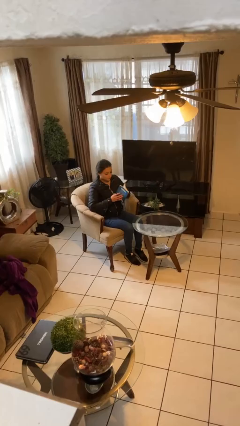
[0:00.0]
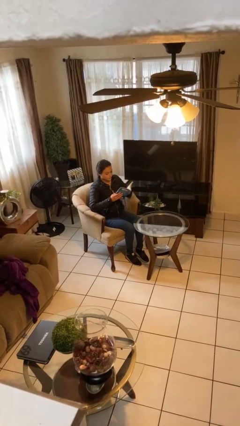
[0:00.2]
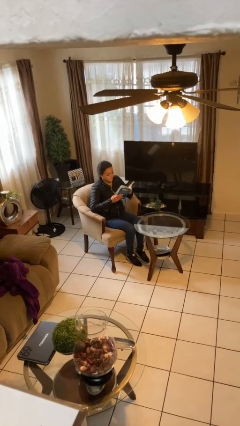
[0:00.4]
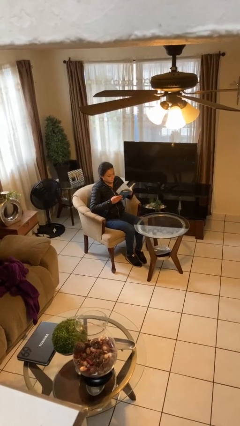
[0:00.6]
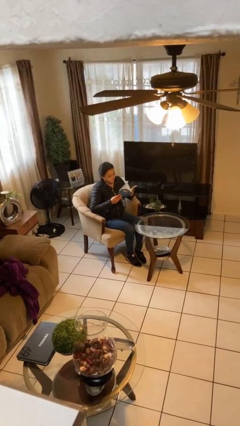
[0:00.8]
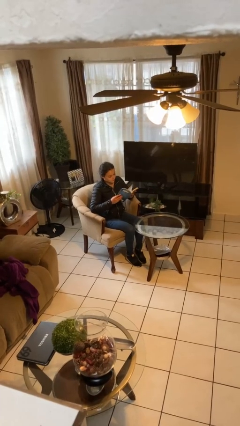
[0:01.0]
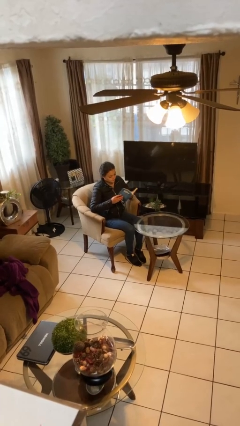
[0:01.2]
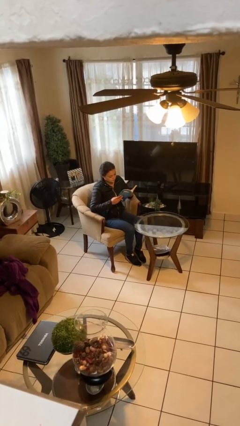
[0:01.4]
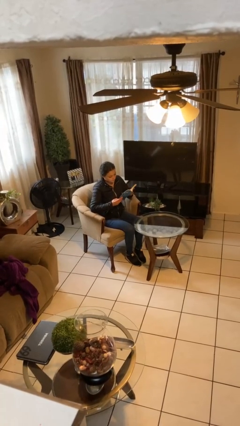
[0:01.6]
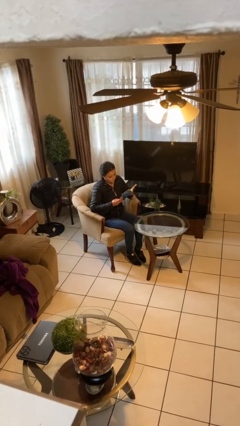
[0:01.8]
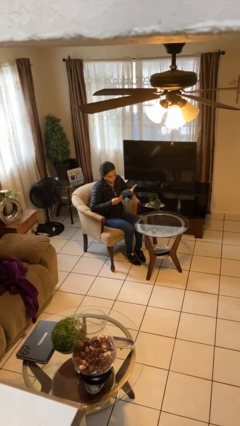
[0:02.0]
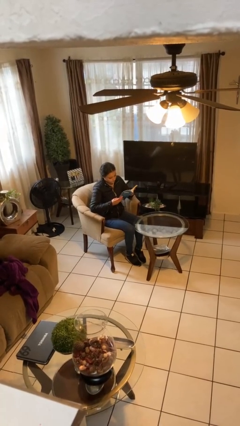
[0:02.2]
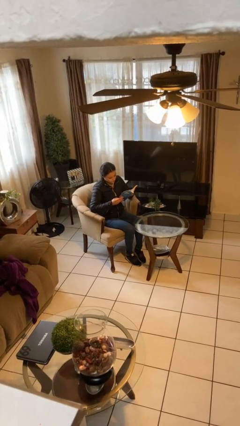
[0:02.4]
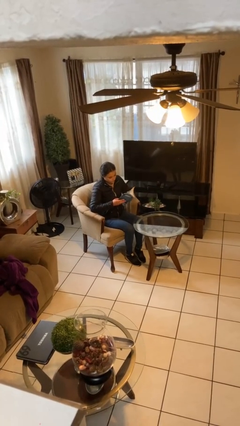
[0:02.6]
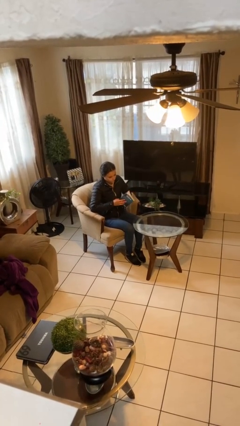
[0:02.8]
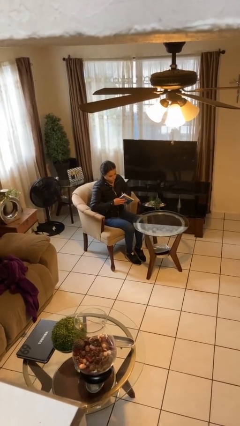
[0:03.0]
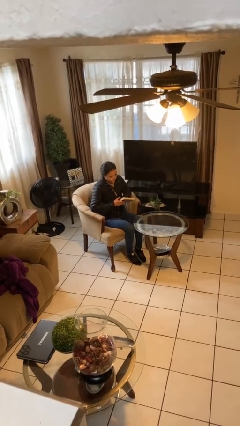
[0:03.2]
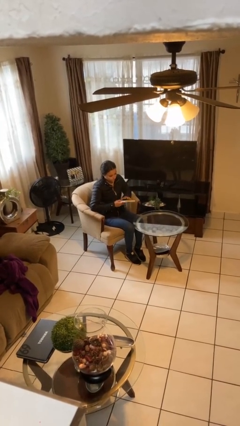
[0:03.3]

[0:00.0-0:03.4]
person reads document

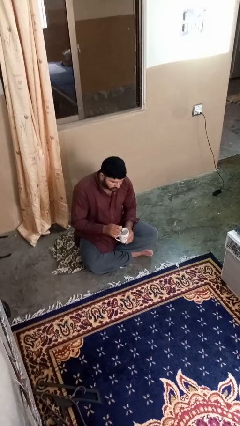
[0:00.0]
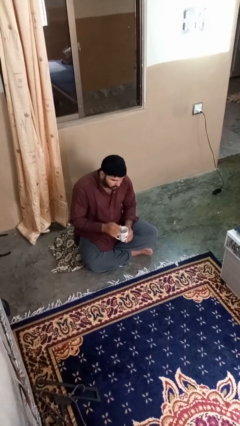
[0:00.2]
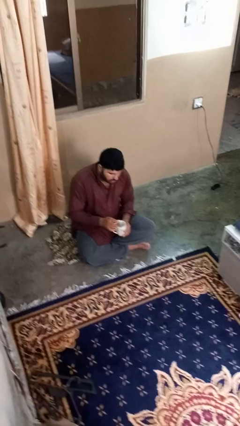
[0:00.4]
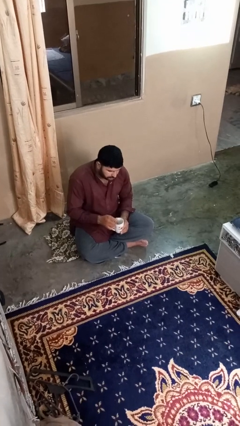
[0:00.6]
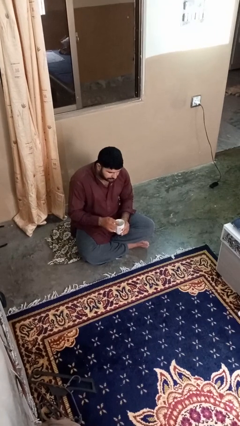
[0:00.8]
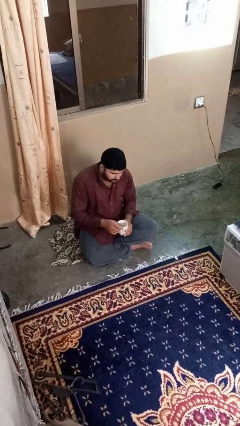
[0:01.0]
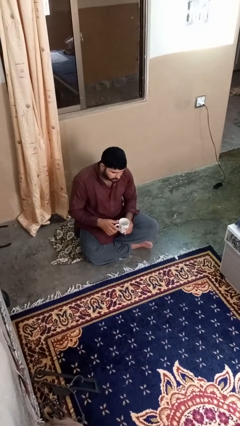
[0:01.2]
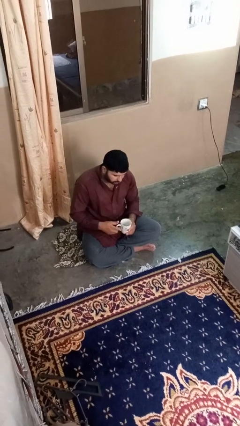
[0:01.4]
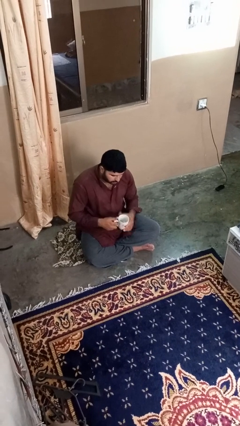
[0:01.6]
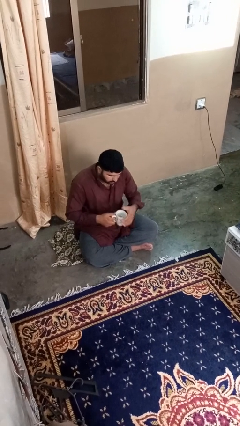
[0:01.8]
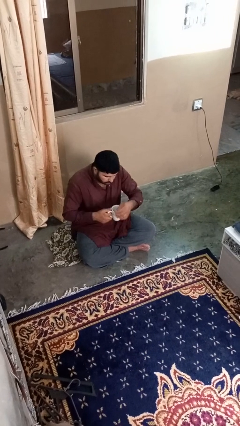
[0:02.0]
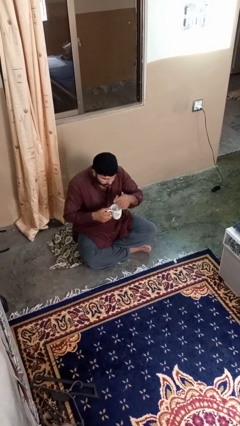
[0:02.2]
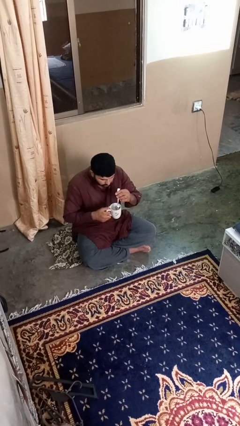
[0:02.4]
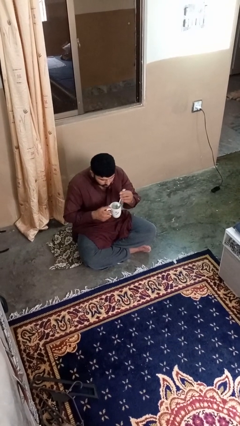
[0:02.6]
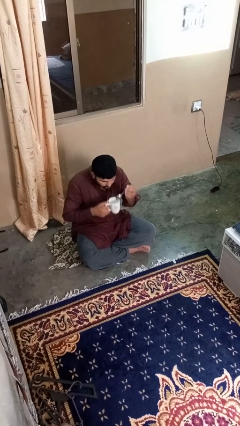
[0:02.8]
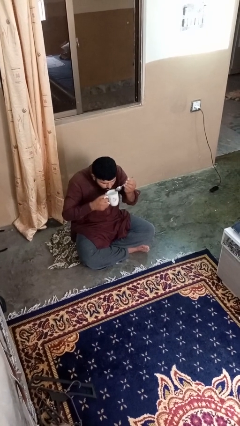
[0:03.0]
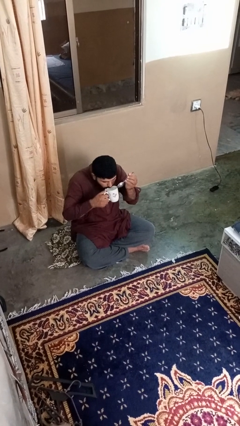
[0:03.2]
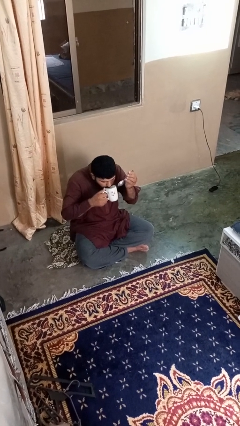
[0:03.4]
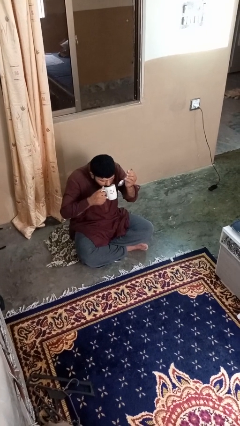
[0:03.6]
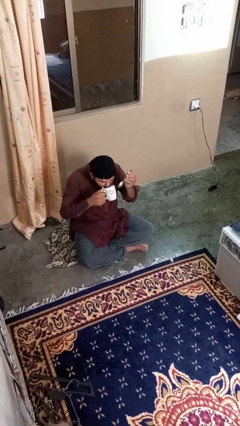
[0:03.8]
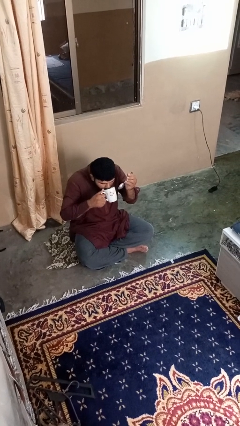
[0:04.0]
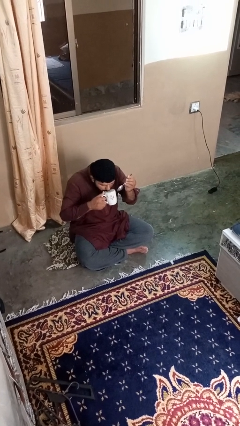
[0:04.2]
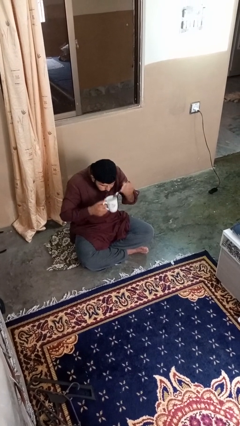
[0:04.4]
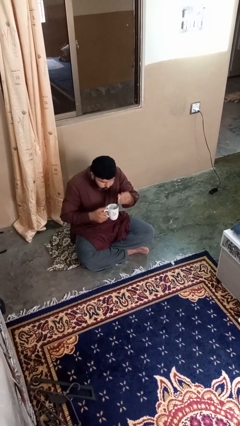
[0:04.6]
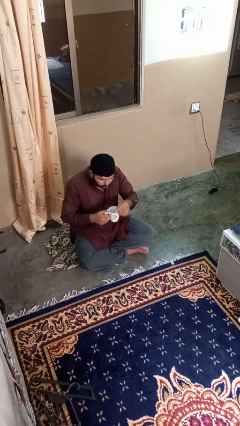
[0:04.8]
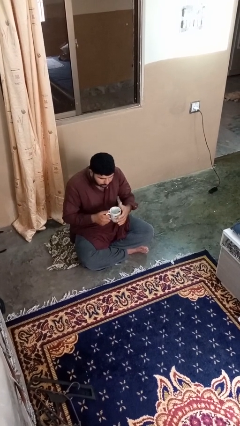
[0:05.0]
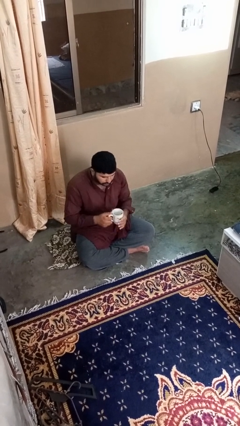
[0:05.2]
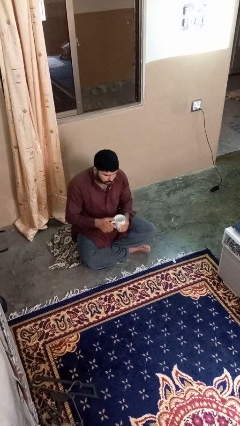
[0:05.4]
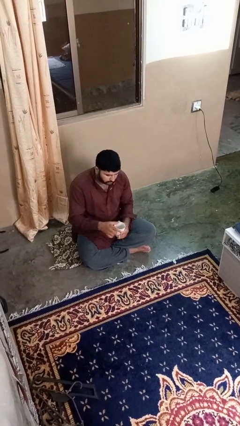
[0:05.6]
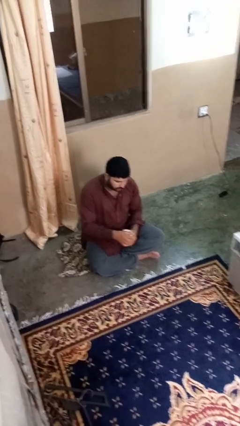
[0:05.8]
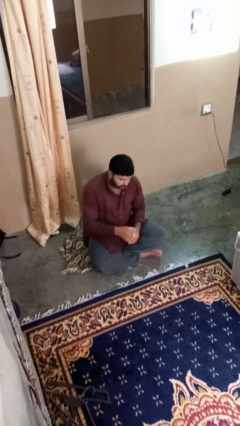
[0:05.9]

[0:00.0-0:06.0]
person drinks from mug

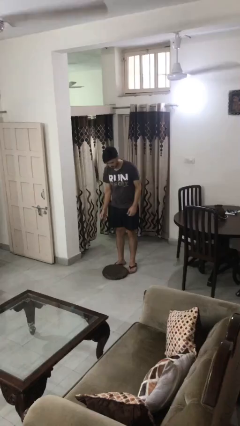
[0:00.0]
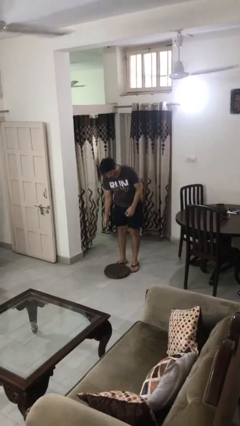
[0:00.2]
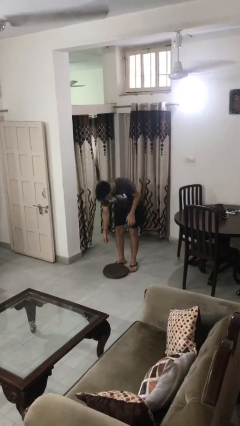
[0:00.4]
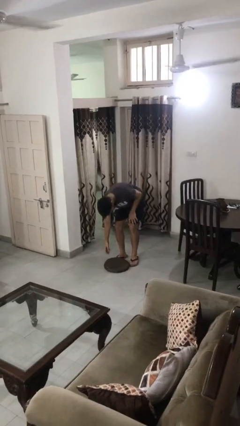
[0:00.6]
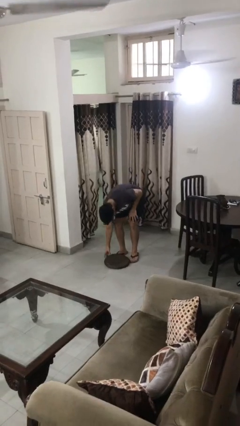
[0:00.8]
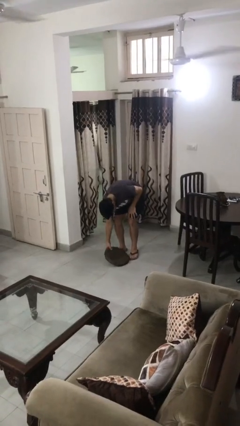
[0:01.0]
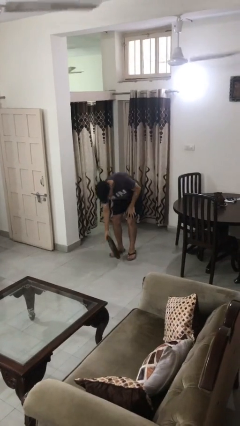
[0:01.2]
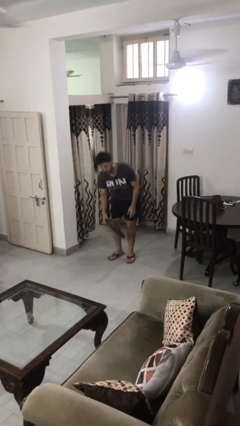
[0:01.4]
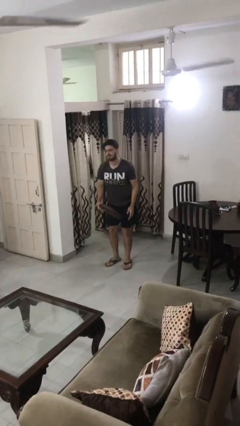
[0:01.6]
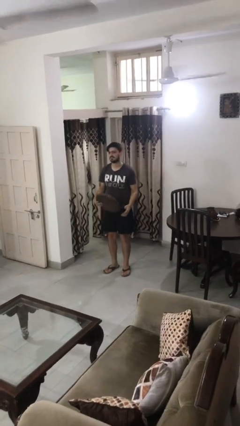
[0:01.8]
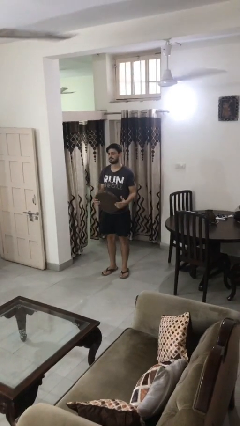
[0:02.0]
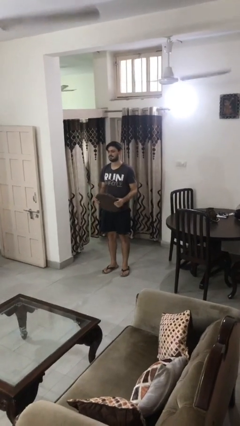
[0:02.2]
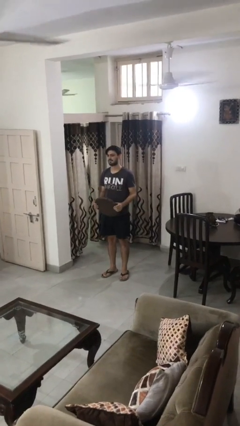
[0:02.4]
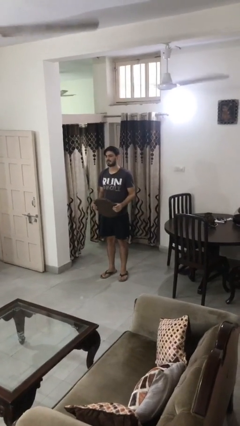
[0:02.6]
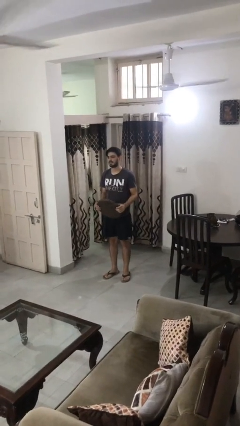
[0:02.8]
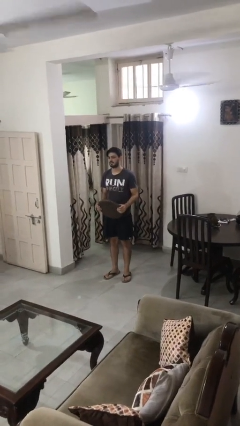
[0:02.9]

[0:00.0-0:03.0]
person picks up object from floor

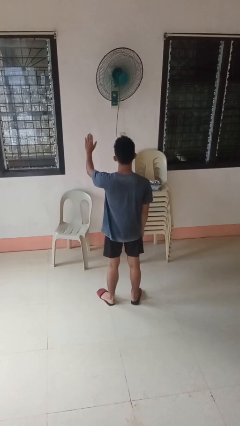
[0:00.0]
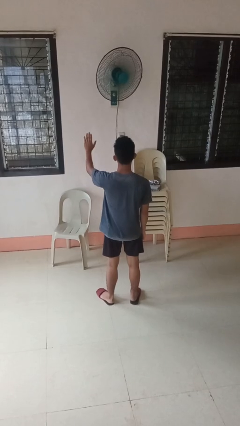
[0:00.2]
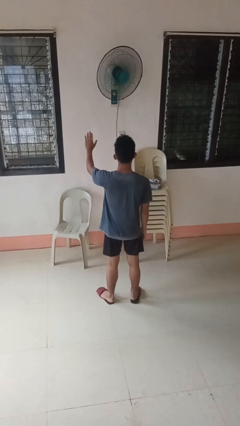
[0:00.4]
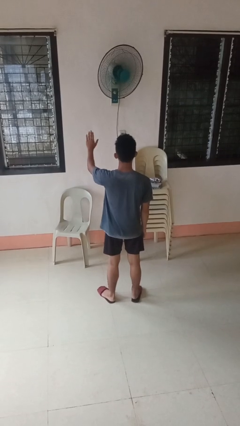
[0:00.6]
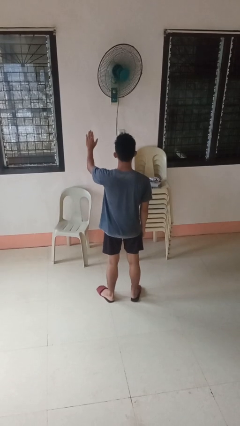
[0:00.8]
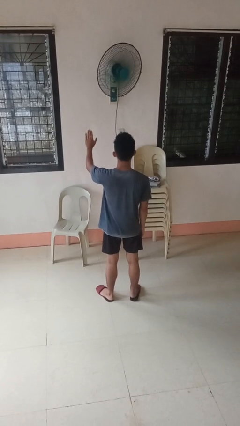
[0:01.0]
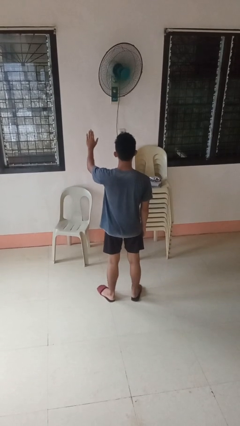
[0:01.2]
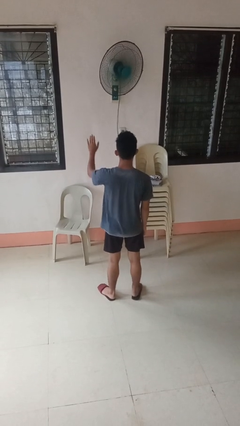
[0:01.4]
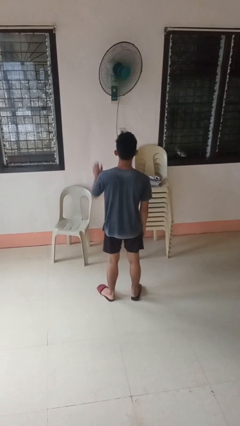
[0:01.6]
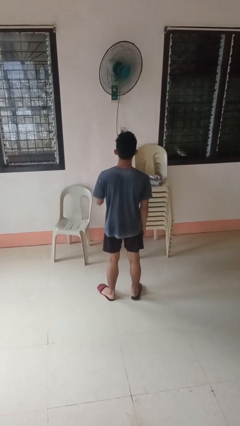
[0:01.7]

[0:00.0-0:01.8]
person gestures stop

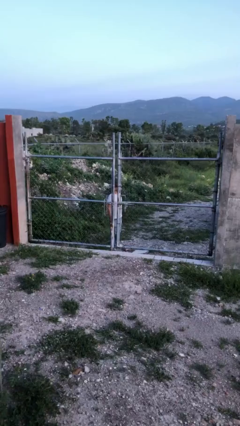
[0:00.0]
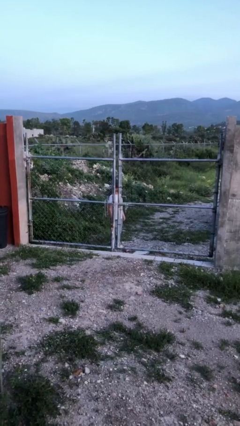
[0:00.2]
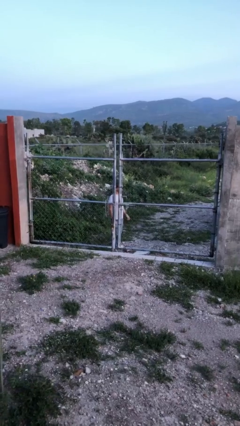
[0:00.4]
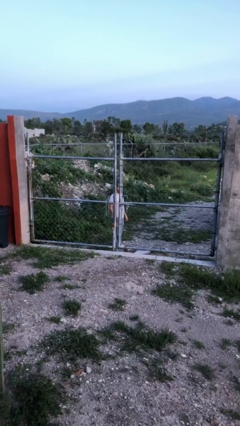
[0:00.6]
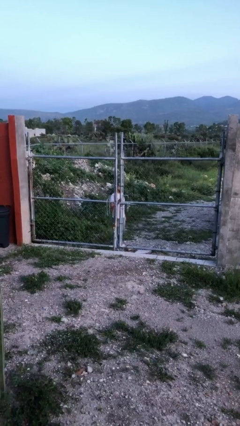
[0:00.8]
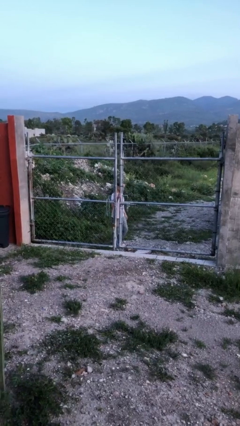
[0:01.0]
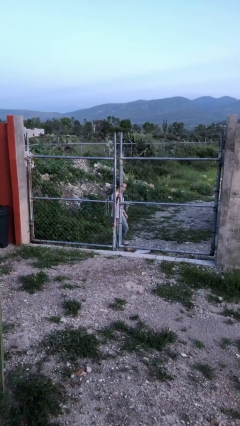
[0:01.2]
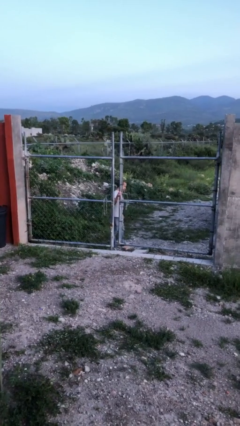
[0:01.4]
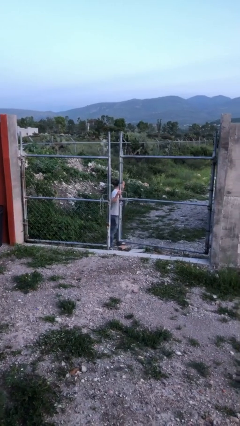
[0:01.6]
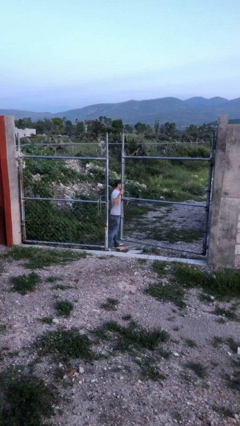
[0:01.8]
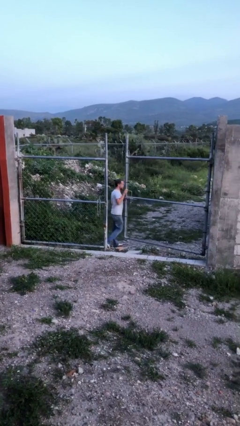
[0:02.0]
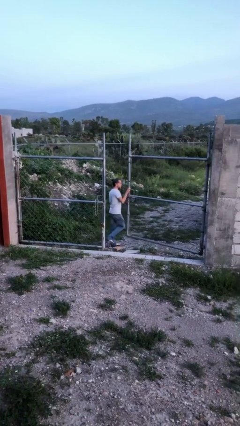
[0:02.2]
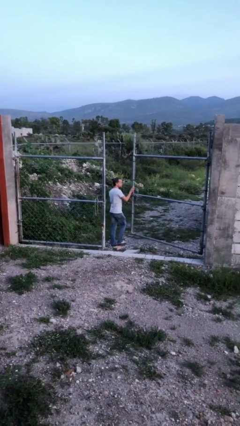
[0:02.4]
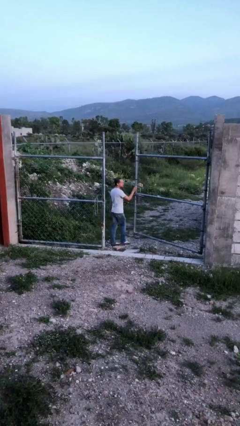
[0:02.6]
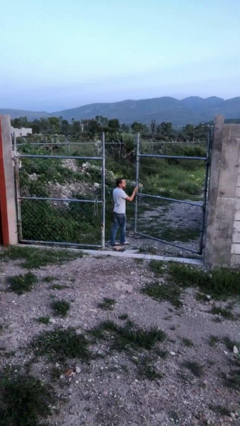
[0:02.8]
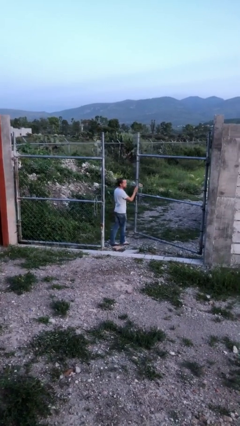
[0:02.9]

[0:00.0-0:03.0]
person opens gate

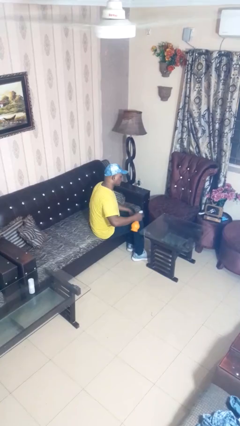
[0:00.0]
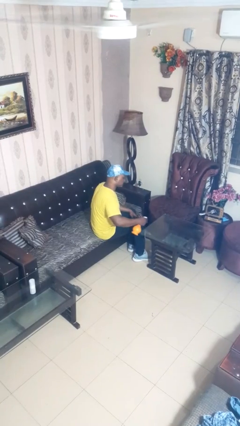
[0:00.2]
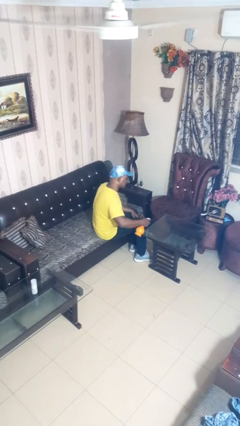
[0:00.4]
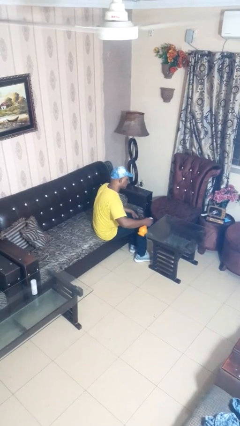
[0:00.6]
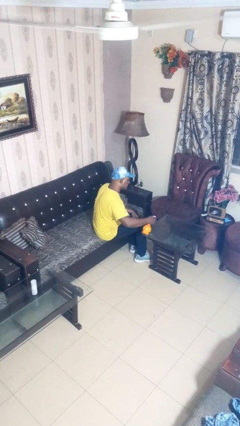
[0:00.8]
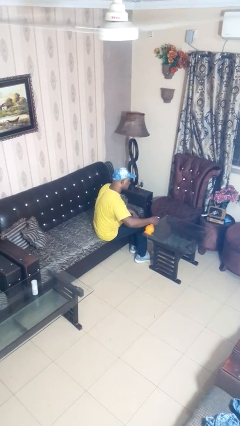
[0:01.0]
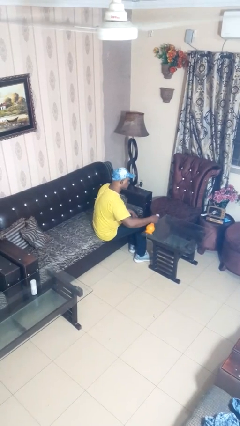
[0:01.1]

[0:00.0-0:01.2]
person sprays from bottle
